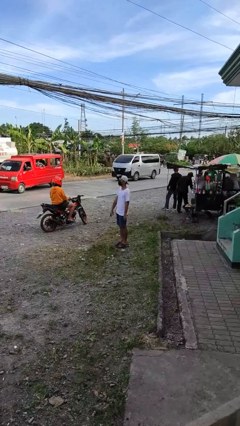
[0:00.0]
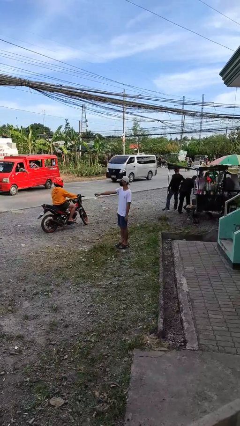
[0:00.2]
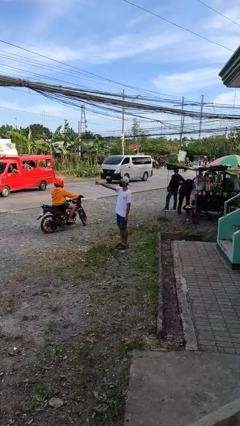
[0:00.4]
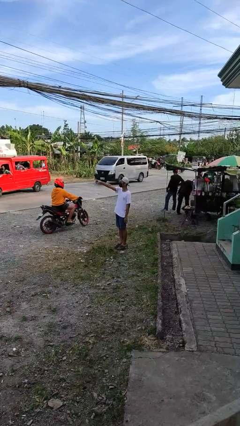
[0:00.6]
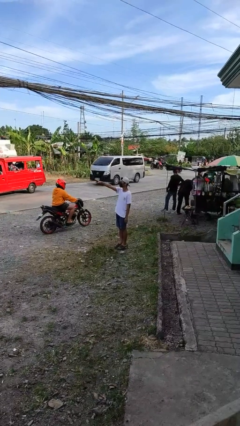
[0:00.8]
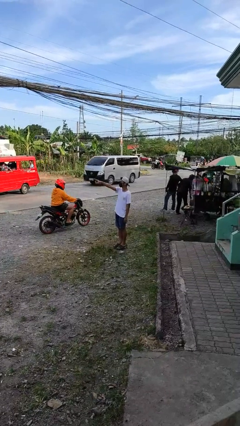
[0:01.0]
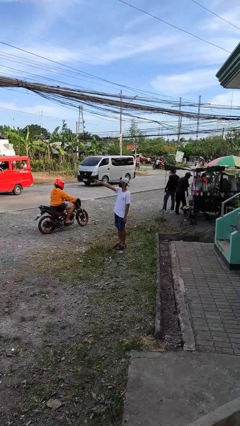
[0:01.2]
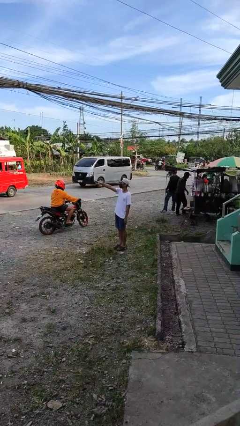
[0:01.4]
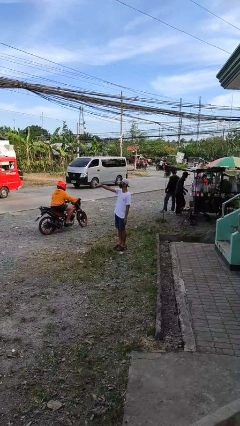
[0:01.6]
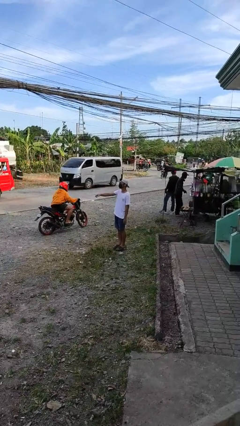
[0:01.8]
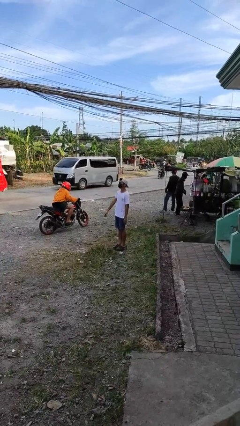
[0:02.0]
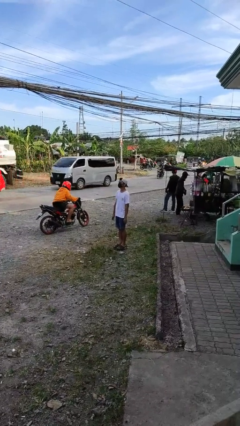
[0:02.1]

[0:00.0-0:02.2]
person points at person

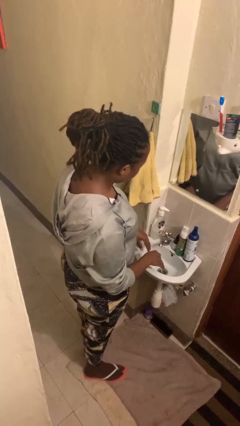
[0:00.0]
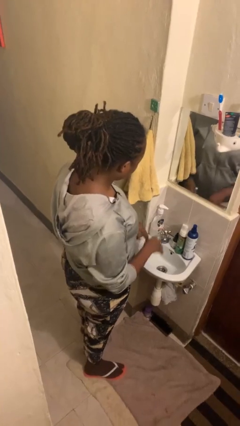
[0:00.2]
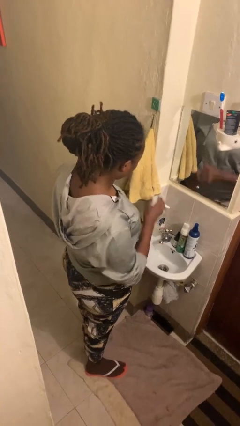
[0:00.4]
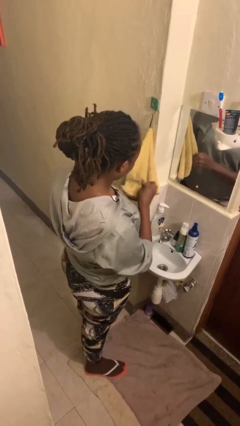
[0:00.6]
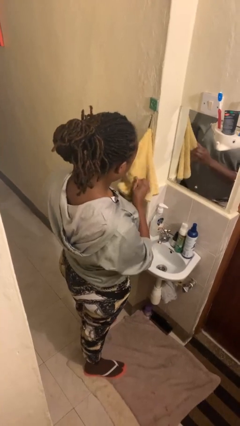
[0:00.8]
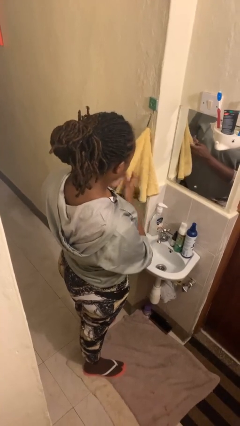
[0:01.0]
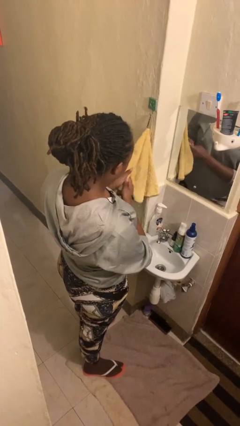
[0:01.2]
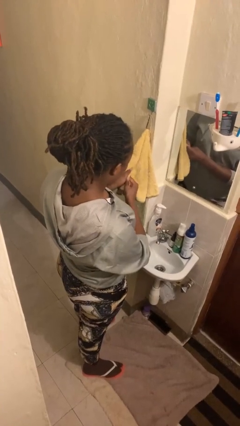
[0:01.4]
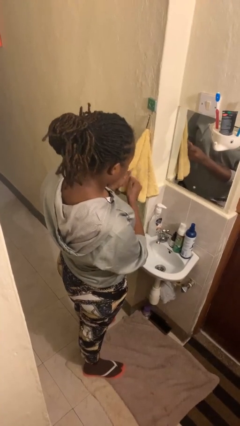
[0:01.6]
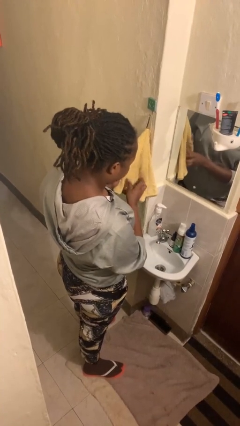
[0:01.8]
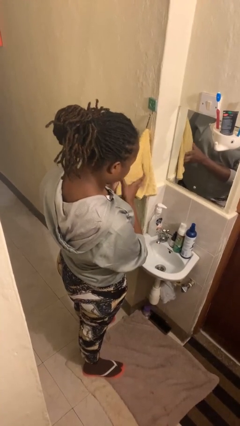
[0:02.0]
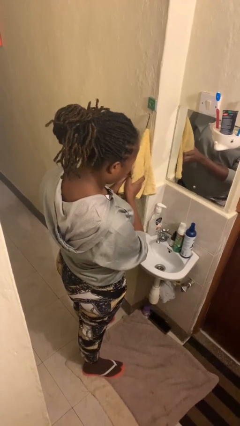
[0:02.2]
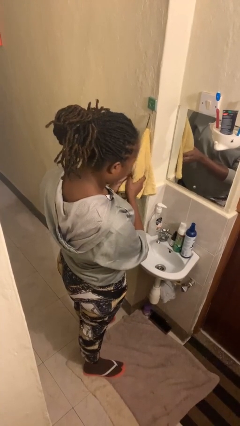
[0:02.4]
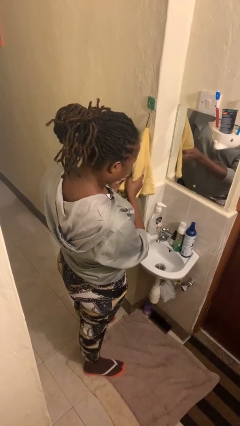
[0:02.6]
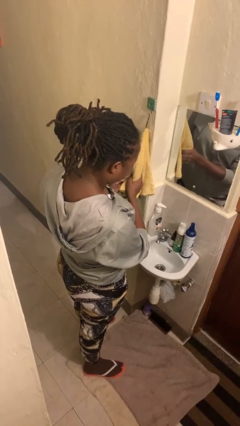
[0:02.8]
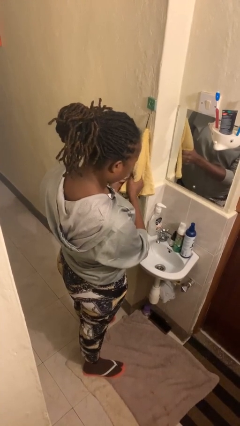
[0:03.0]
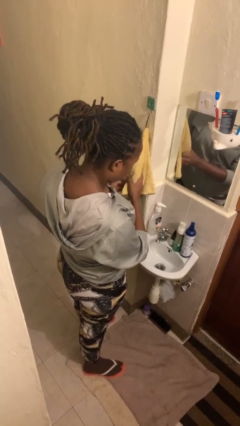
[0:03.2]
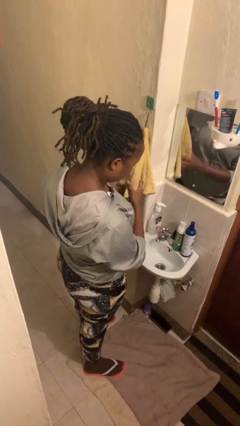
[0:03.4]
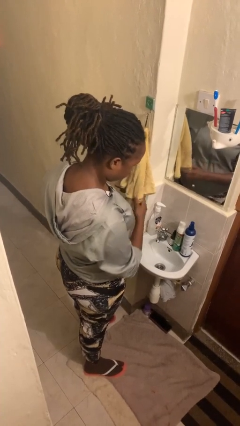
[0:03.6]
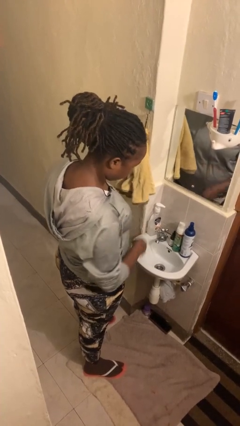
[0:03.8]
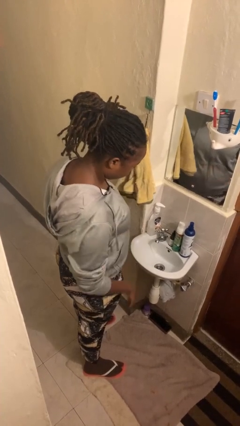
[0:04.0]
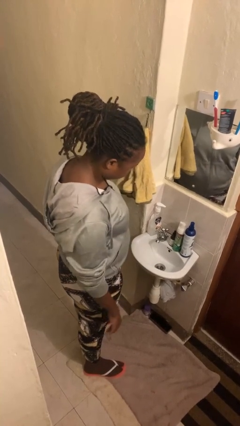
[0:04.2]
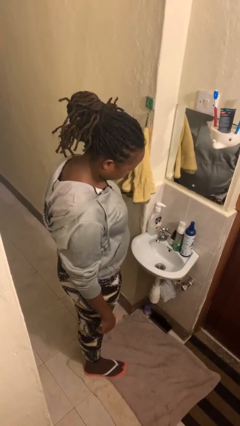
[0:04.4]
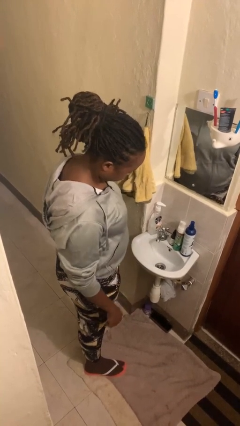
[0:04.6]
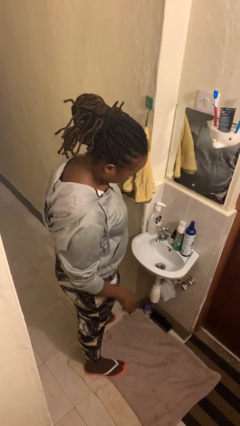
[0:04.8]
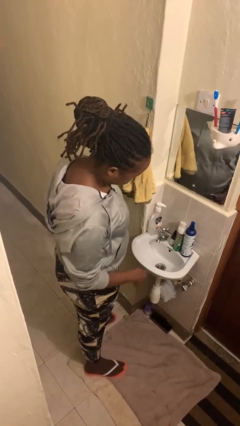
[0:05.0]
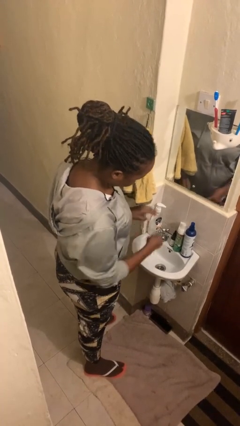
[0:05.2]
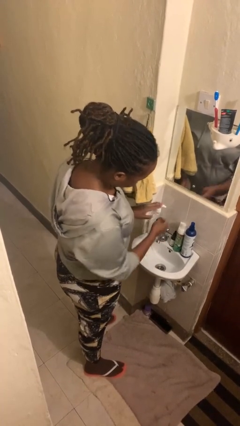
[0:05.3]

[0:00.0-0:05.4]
person dries hands with towel

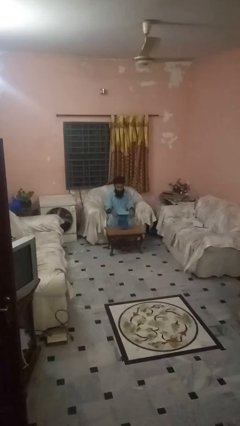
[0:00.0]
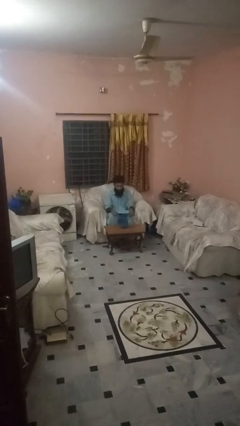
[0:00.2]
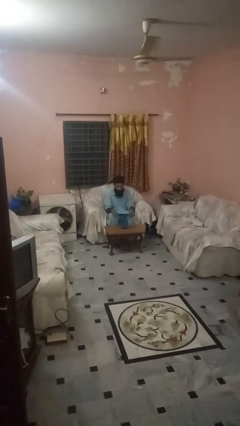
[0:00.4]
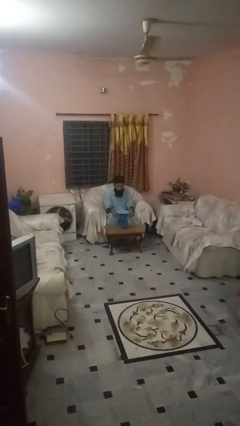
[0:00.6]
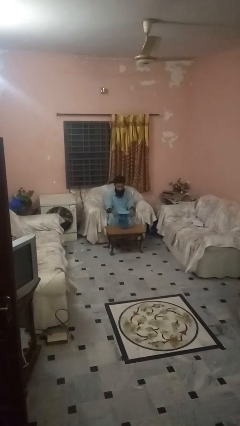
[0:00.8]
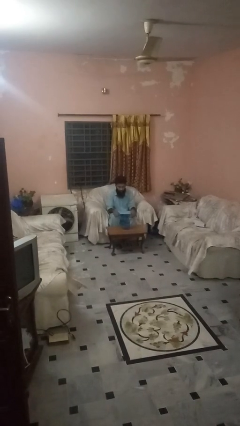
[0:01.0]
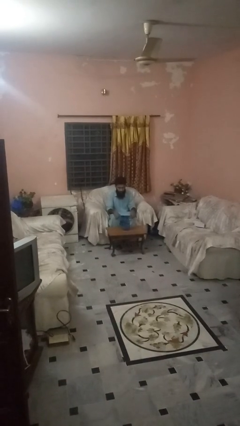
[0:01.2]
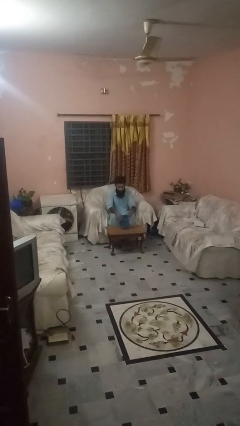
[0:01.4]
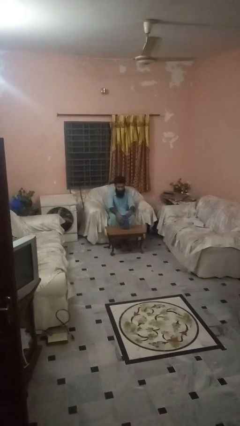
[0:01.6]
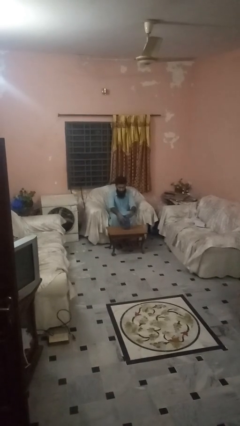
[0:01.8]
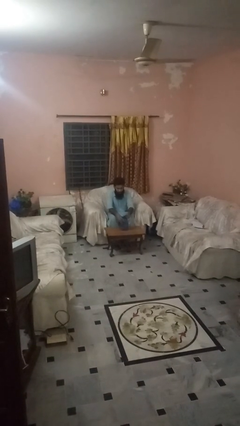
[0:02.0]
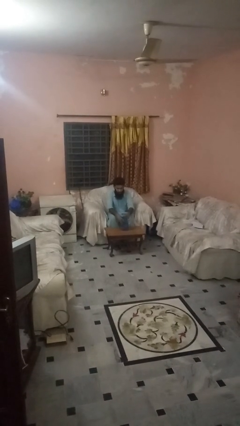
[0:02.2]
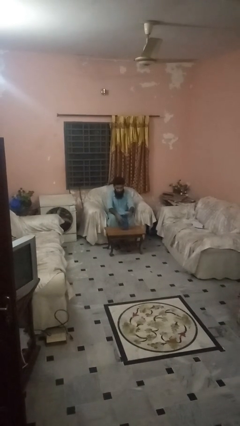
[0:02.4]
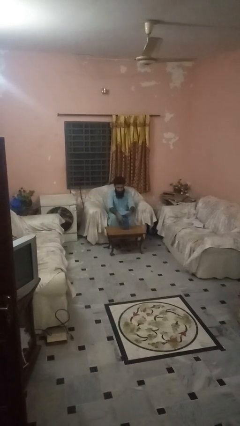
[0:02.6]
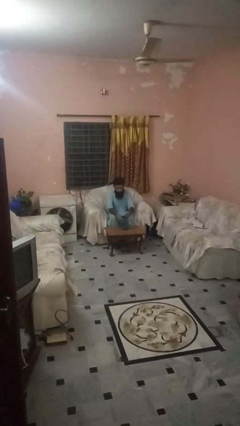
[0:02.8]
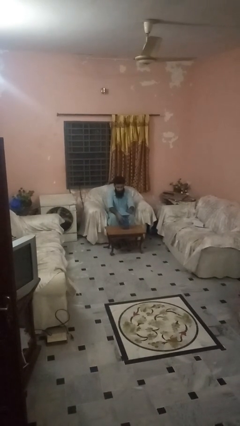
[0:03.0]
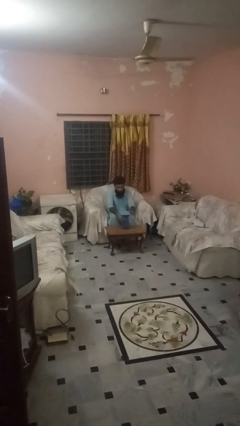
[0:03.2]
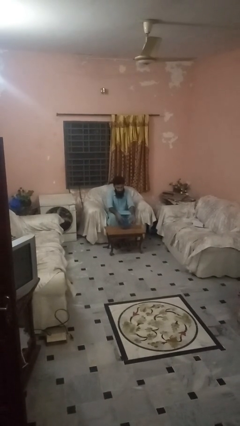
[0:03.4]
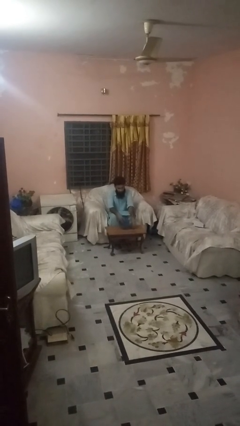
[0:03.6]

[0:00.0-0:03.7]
person unscrews lid from bottle

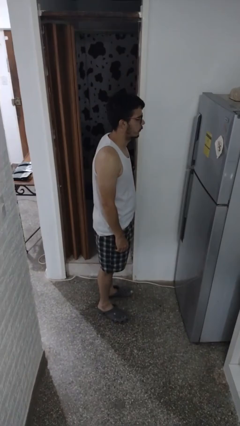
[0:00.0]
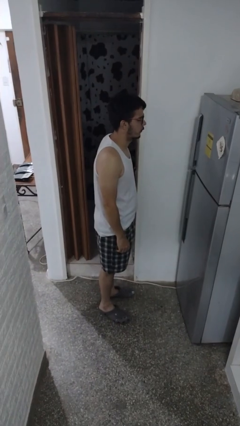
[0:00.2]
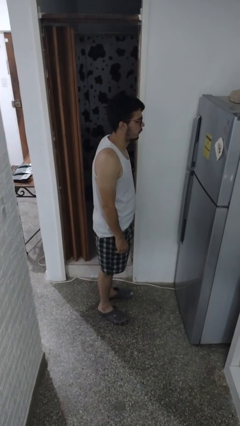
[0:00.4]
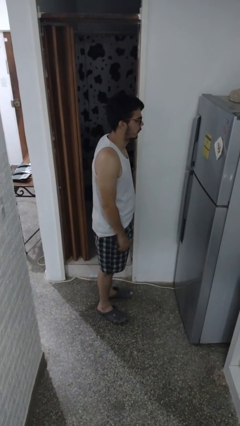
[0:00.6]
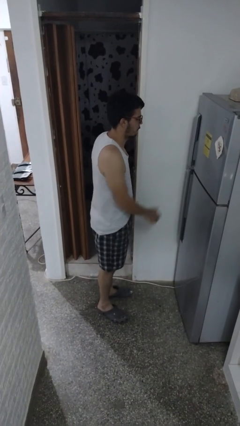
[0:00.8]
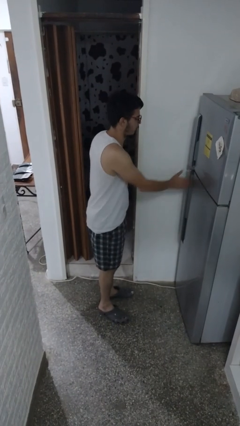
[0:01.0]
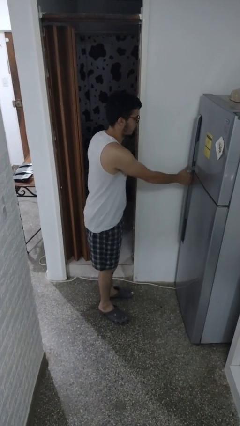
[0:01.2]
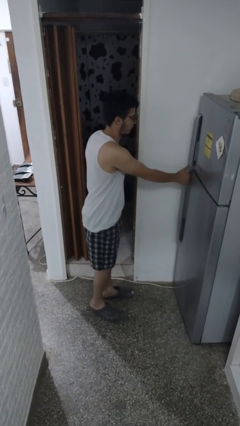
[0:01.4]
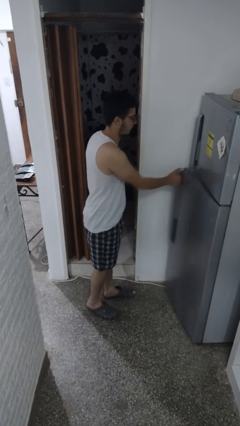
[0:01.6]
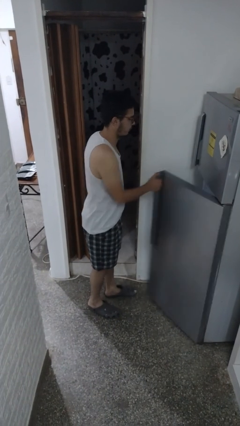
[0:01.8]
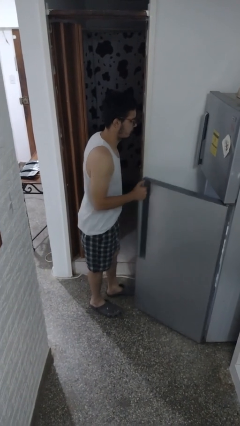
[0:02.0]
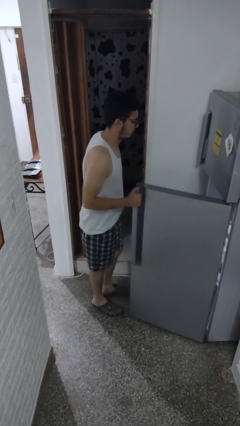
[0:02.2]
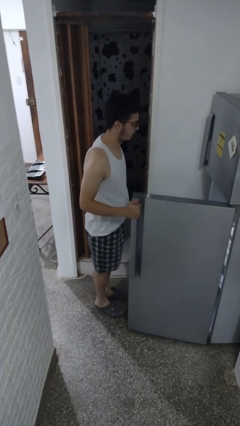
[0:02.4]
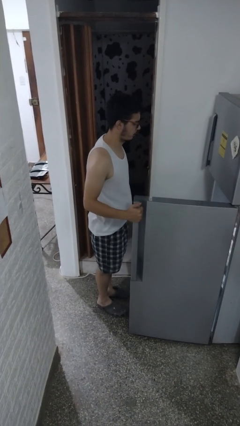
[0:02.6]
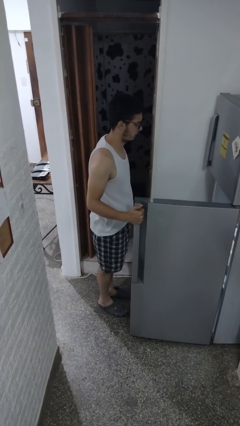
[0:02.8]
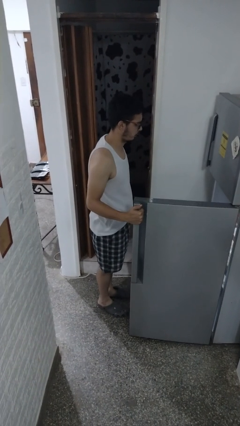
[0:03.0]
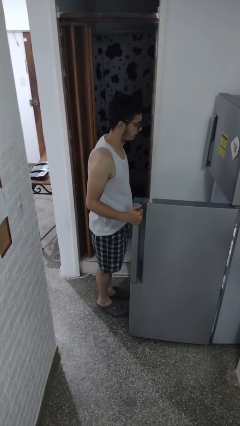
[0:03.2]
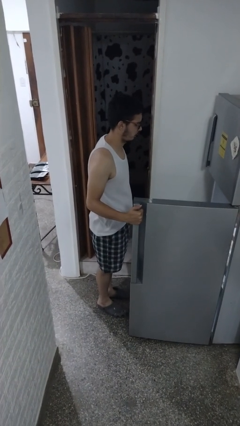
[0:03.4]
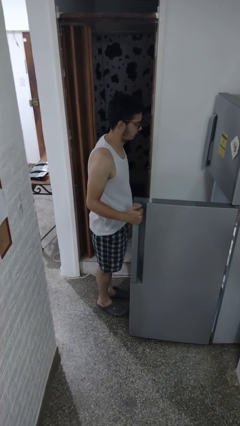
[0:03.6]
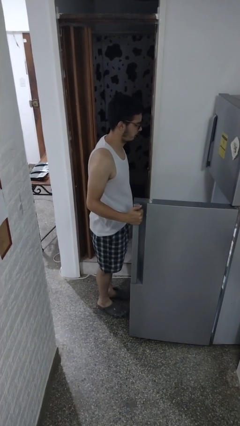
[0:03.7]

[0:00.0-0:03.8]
person opens refrigerator

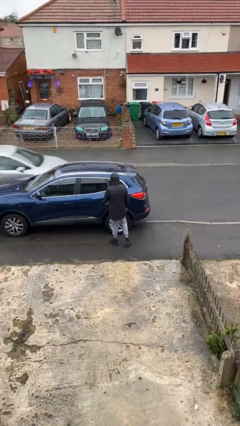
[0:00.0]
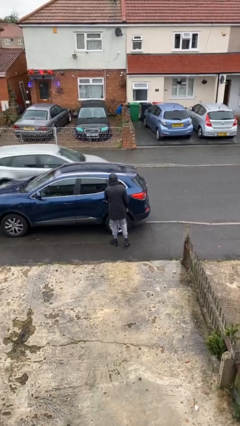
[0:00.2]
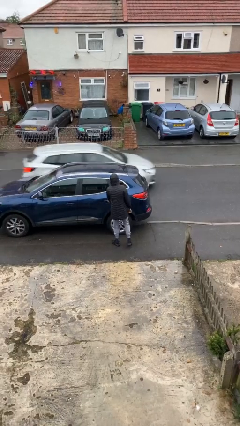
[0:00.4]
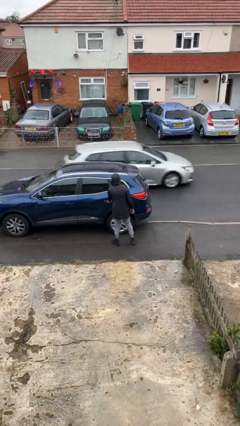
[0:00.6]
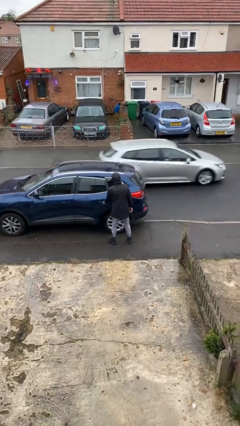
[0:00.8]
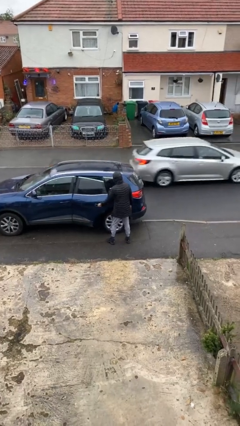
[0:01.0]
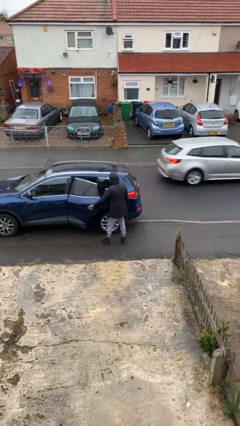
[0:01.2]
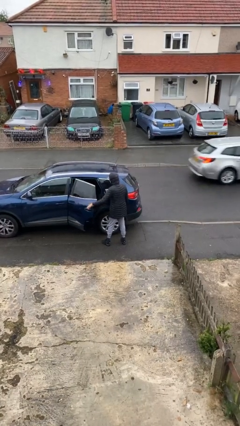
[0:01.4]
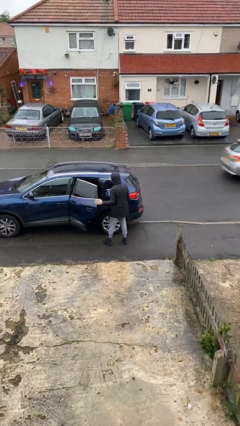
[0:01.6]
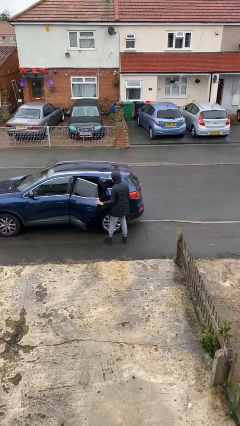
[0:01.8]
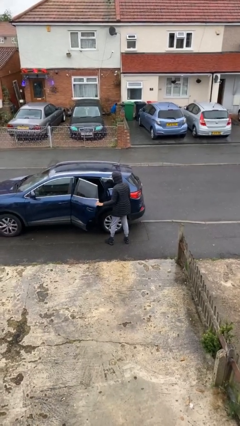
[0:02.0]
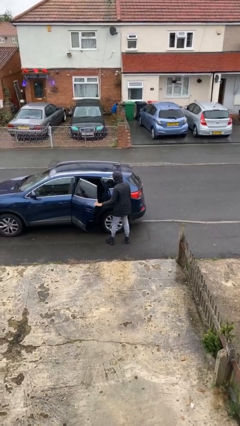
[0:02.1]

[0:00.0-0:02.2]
person opens car door
